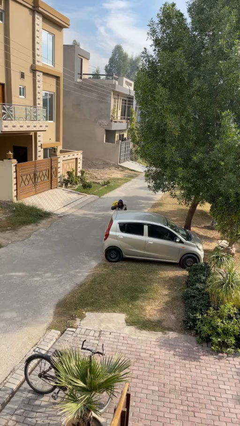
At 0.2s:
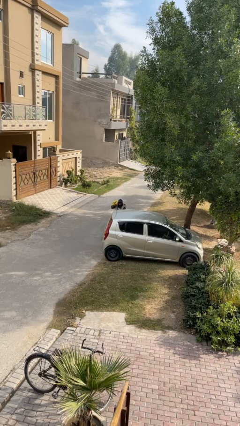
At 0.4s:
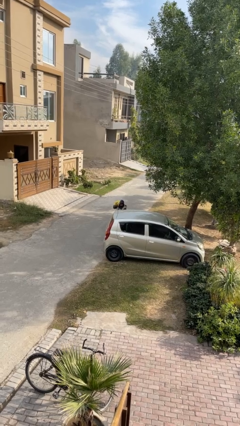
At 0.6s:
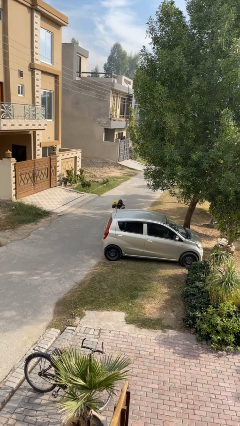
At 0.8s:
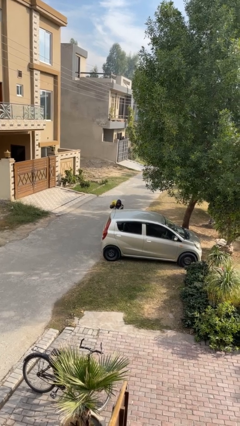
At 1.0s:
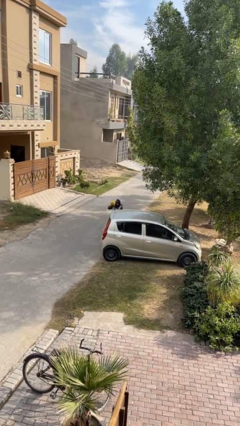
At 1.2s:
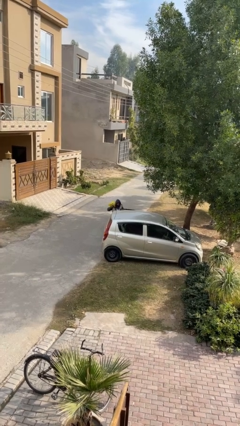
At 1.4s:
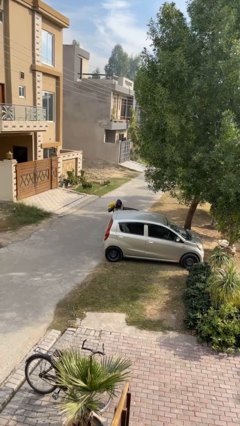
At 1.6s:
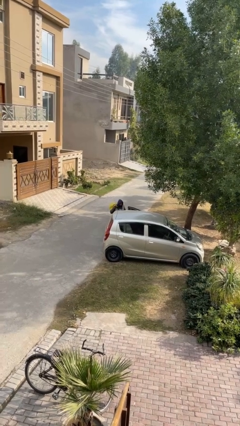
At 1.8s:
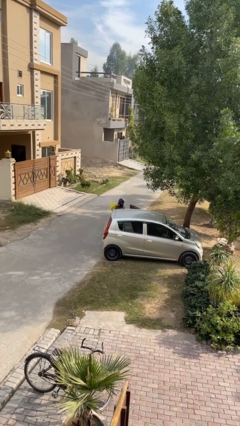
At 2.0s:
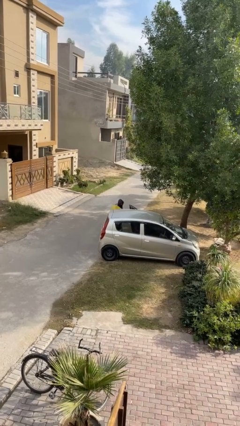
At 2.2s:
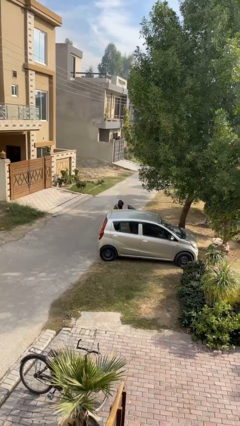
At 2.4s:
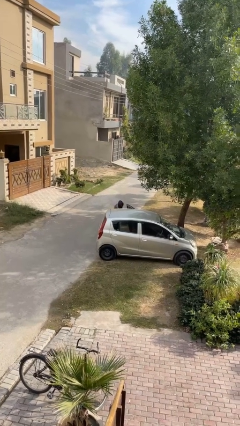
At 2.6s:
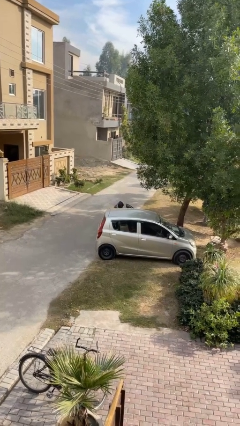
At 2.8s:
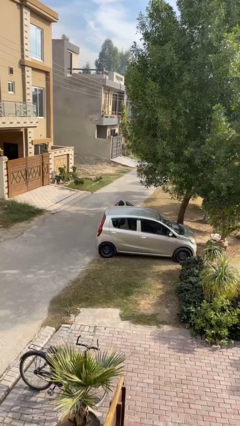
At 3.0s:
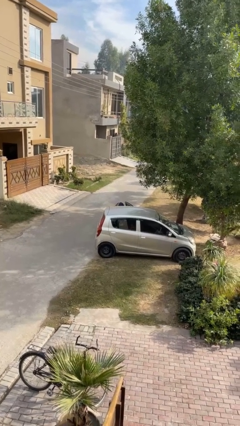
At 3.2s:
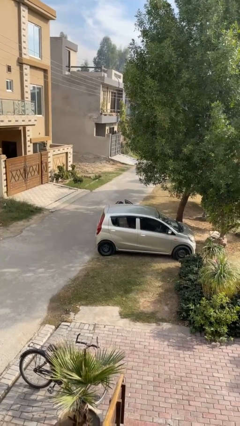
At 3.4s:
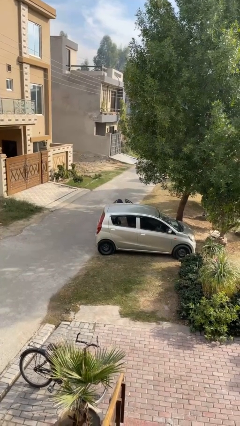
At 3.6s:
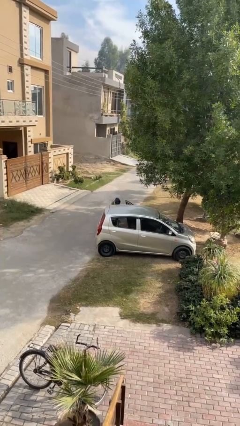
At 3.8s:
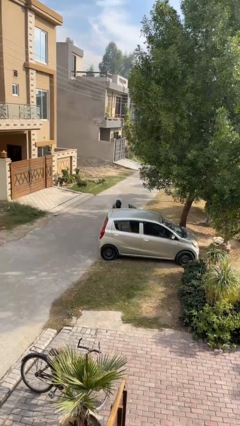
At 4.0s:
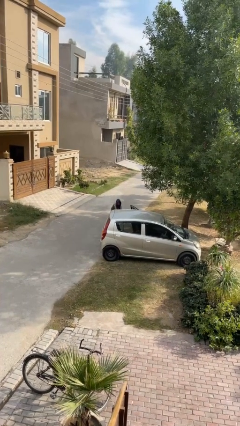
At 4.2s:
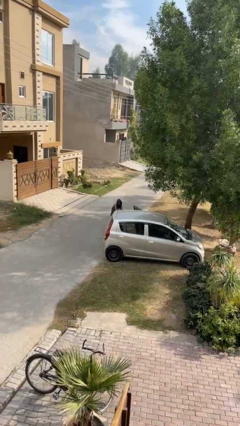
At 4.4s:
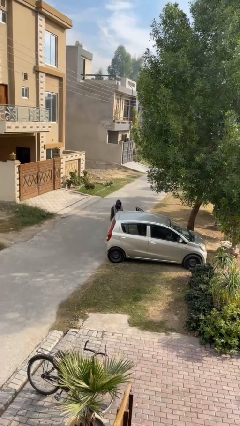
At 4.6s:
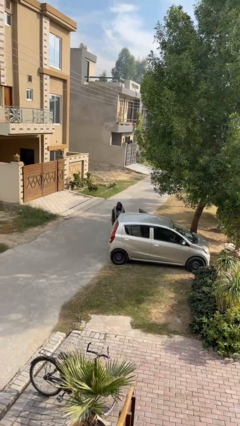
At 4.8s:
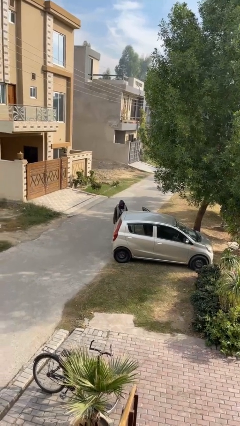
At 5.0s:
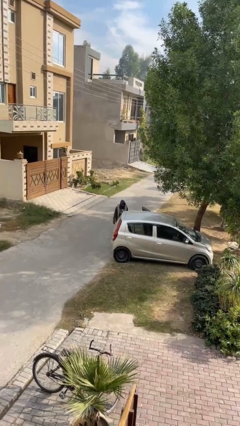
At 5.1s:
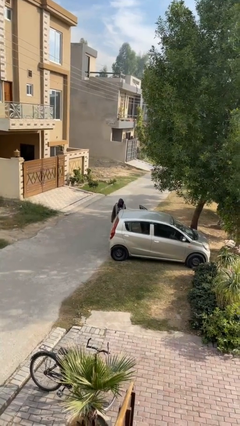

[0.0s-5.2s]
person loads car

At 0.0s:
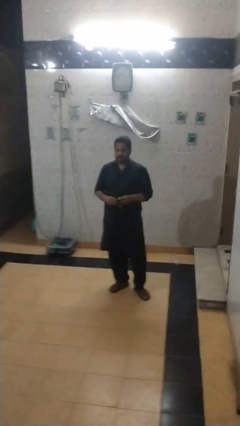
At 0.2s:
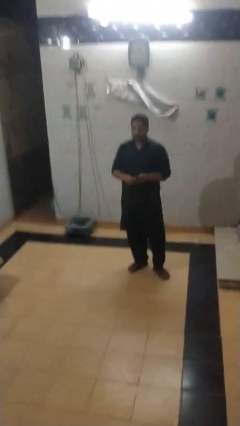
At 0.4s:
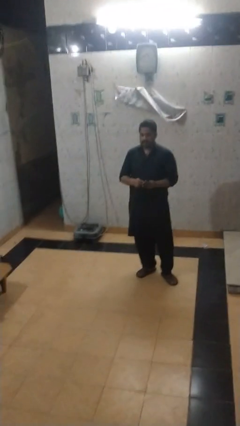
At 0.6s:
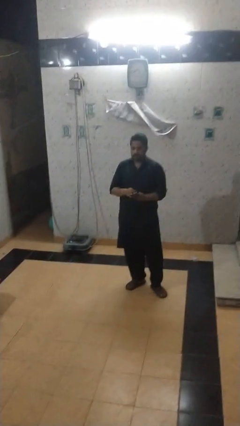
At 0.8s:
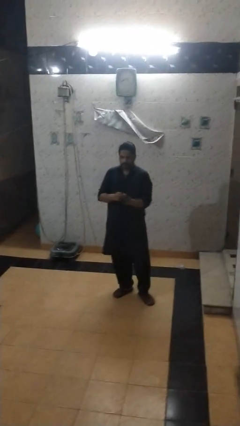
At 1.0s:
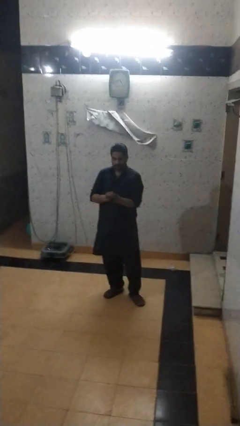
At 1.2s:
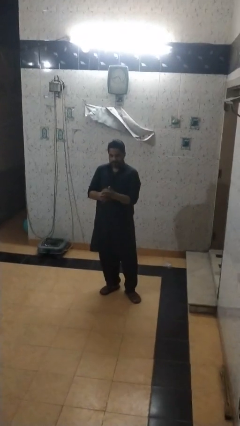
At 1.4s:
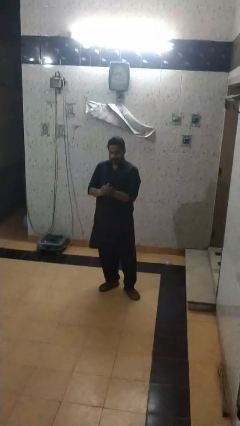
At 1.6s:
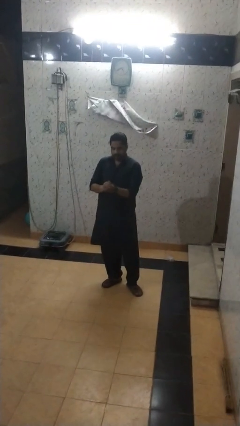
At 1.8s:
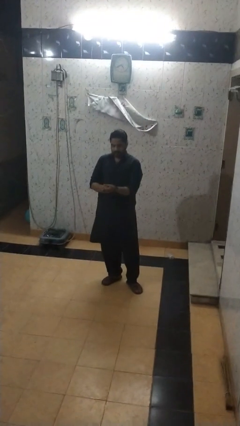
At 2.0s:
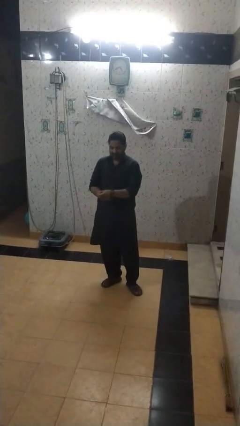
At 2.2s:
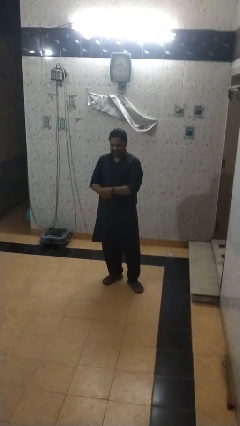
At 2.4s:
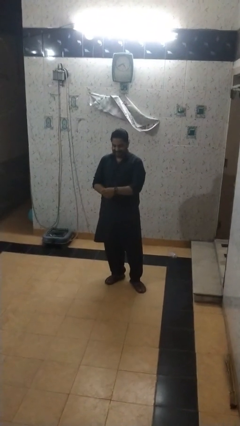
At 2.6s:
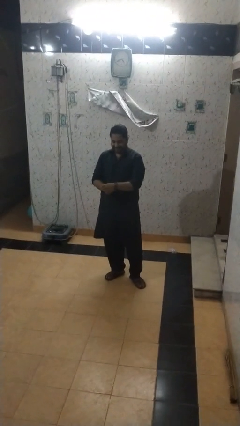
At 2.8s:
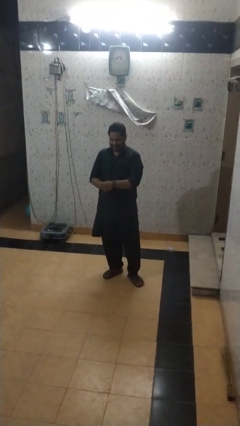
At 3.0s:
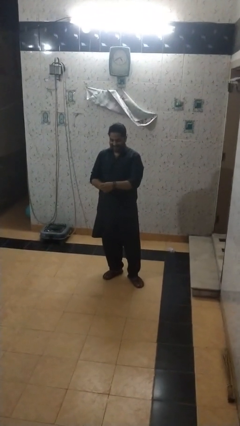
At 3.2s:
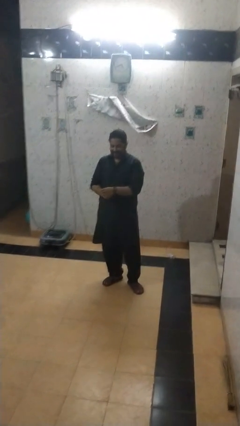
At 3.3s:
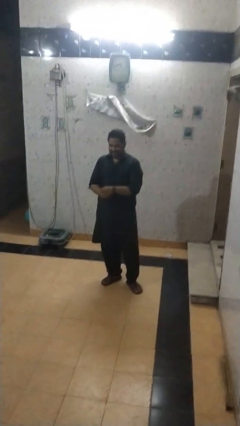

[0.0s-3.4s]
person puts on wristwatch

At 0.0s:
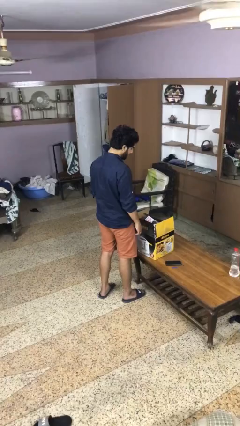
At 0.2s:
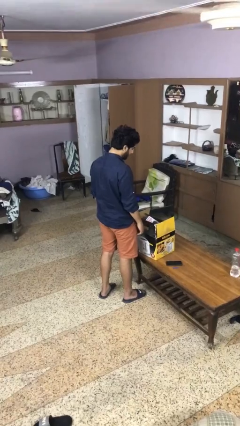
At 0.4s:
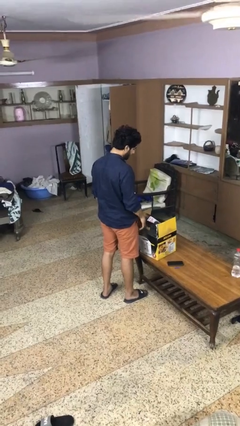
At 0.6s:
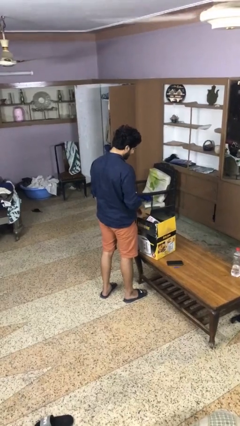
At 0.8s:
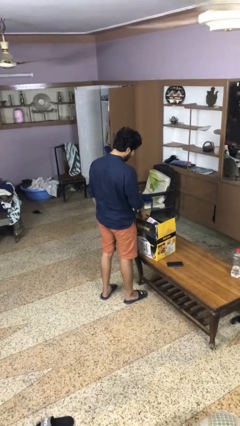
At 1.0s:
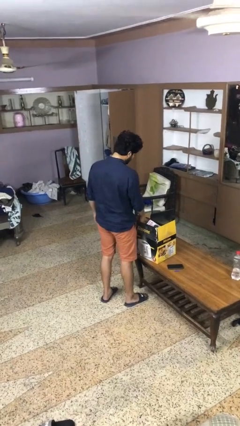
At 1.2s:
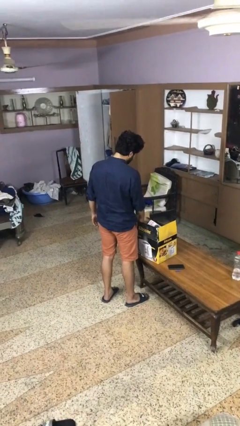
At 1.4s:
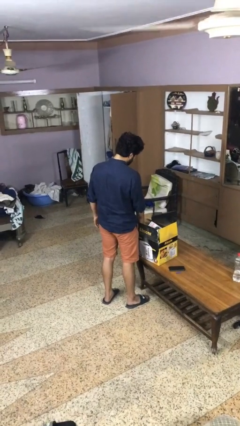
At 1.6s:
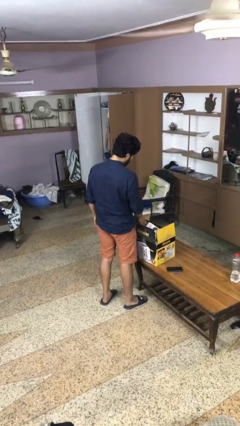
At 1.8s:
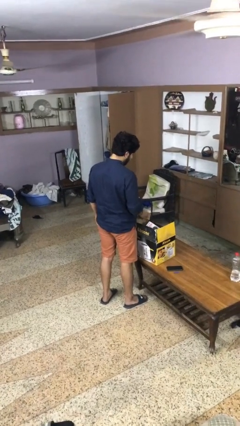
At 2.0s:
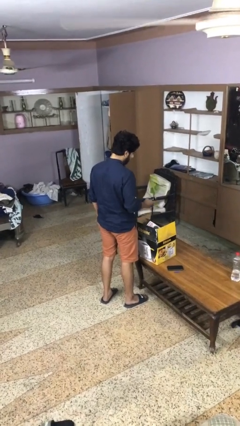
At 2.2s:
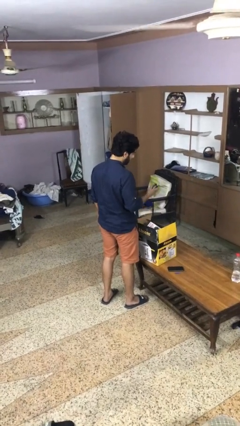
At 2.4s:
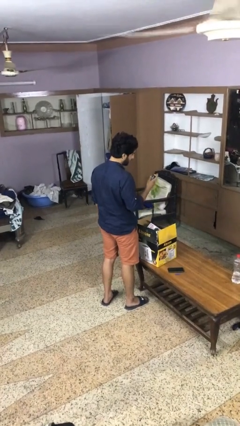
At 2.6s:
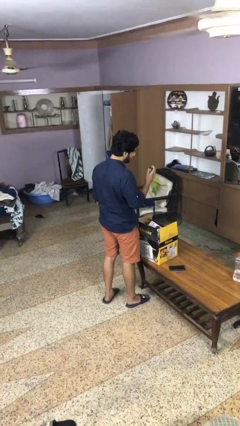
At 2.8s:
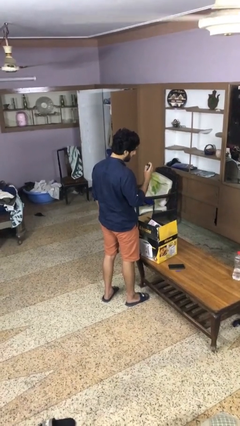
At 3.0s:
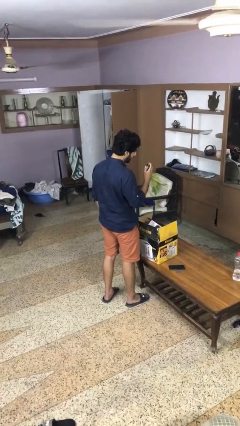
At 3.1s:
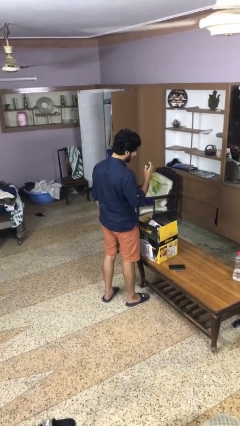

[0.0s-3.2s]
person takes object from box

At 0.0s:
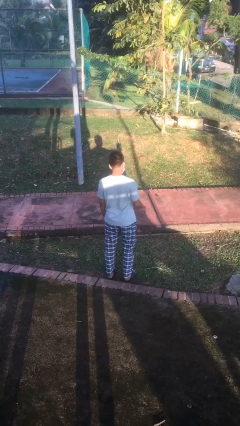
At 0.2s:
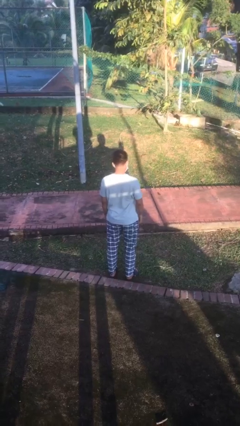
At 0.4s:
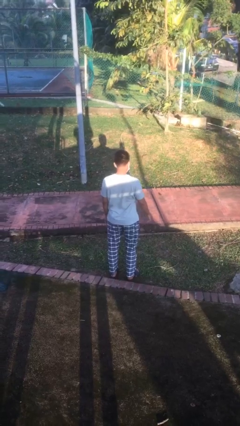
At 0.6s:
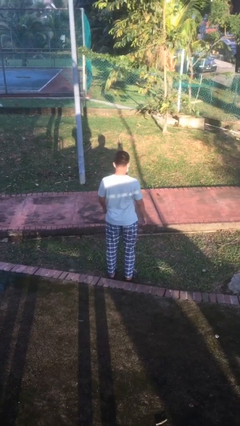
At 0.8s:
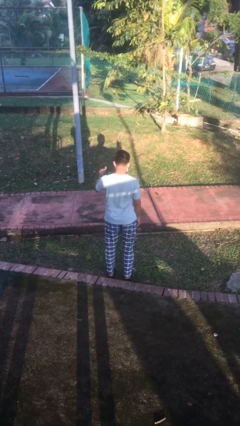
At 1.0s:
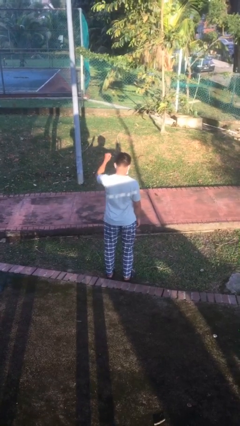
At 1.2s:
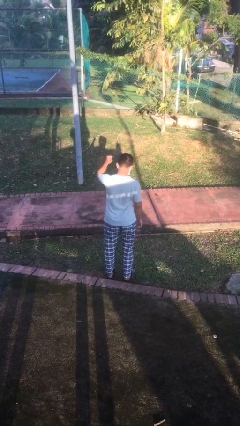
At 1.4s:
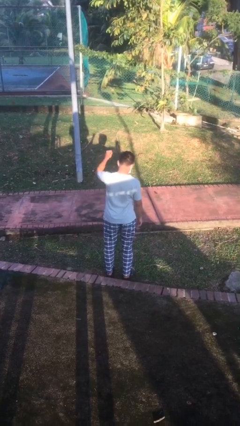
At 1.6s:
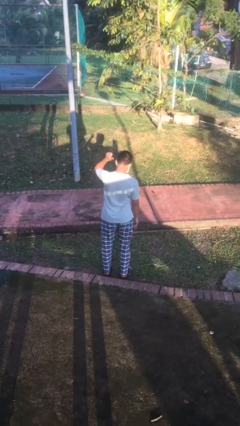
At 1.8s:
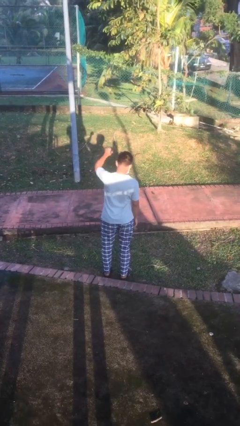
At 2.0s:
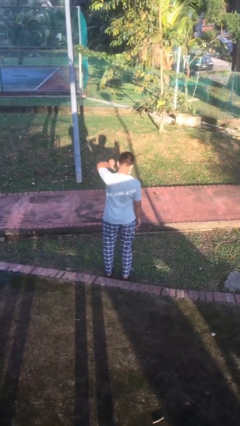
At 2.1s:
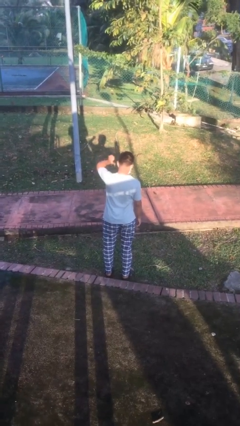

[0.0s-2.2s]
person gestures behind me

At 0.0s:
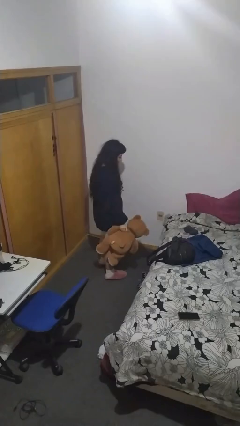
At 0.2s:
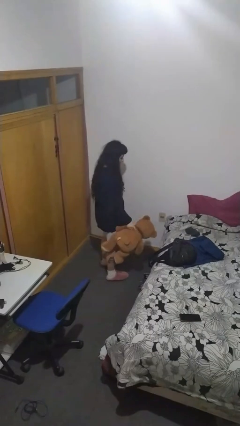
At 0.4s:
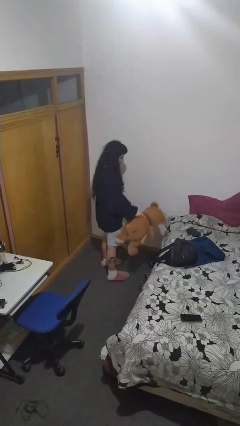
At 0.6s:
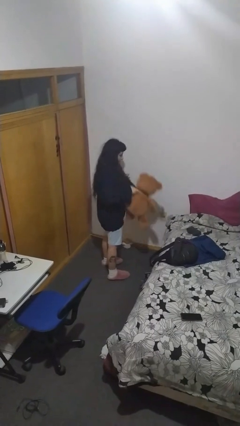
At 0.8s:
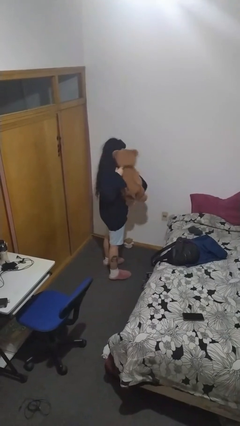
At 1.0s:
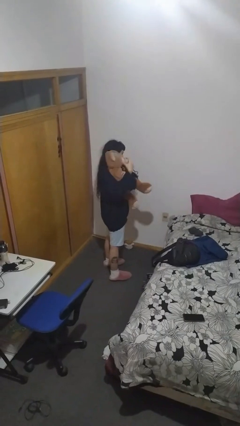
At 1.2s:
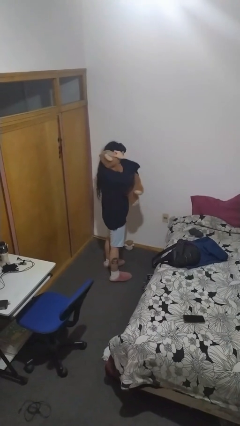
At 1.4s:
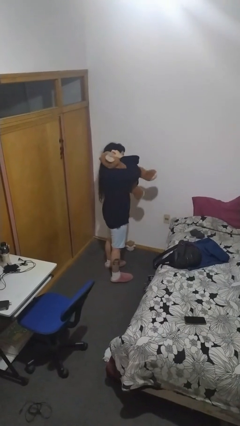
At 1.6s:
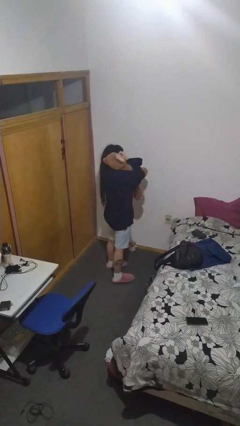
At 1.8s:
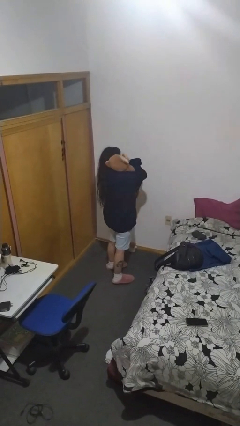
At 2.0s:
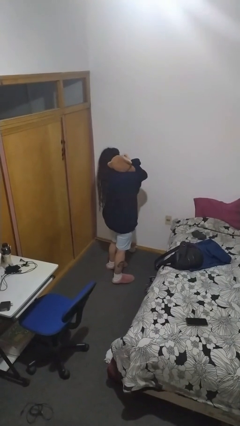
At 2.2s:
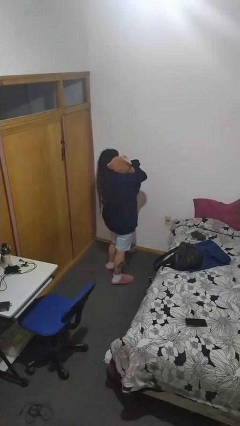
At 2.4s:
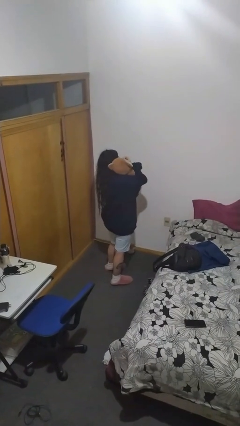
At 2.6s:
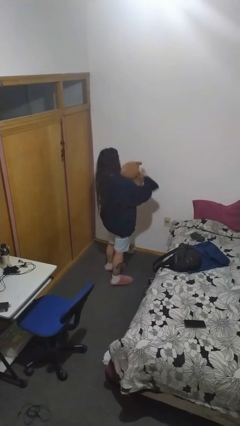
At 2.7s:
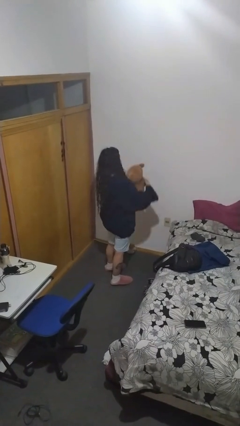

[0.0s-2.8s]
person hugs stuffed animal

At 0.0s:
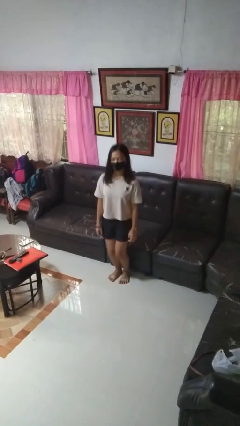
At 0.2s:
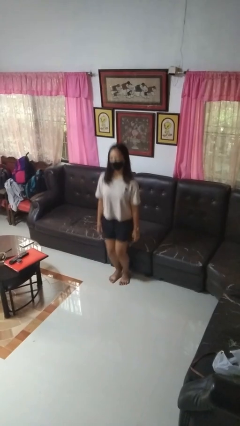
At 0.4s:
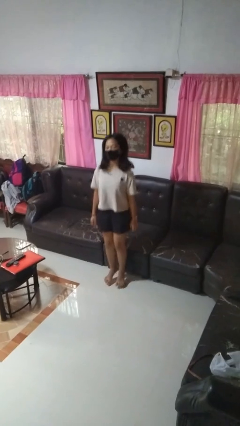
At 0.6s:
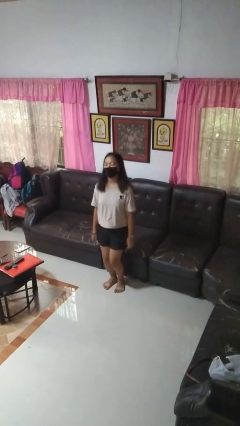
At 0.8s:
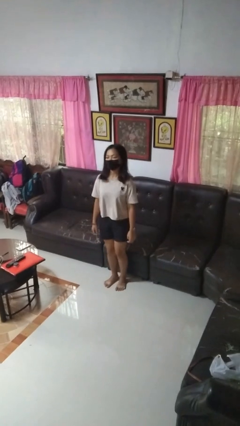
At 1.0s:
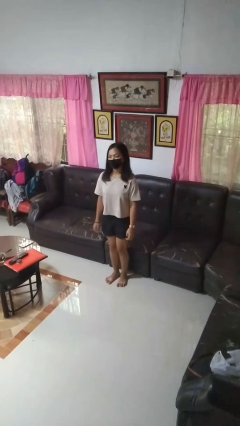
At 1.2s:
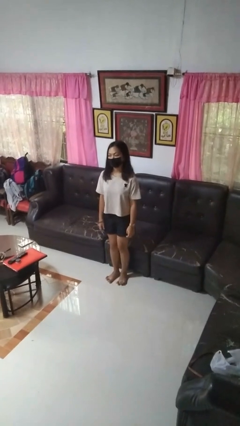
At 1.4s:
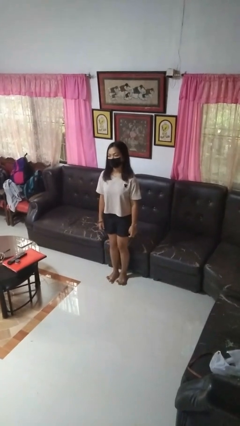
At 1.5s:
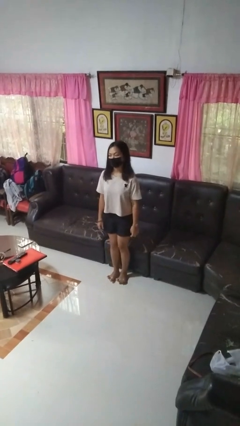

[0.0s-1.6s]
person jumps
